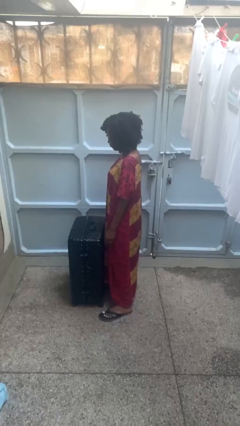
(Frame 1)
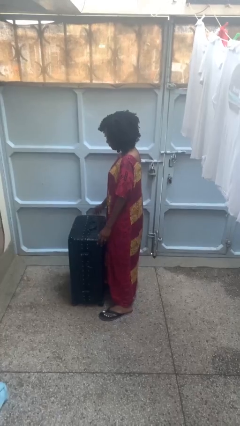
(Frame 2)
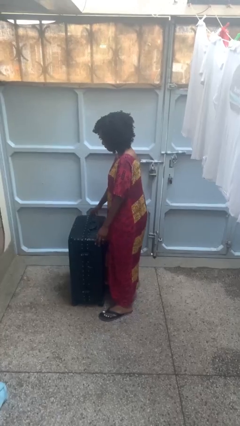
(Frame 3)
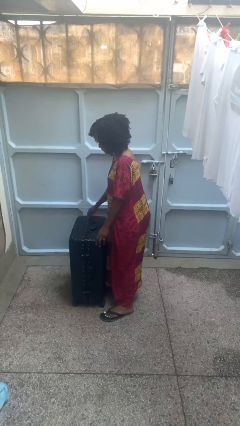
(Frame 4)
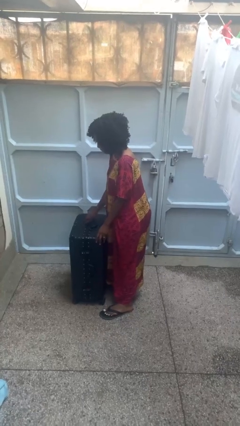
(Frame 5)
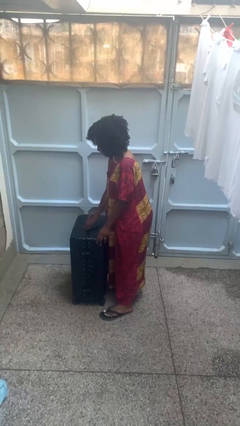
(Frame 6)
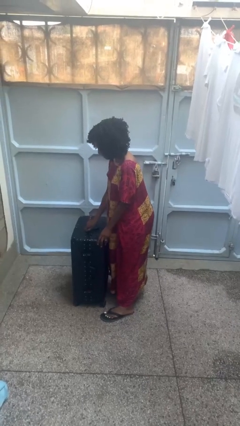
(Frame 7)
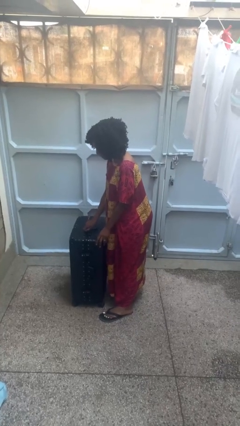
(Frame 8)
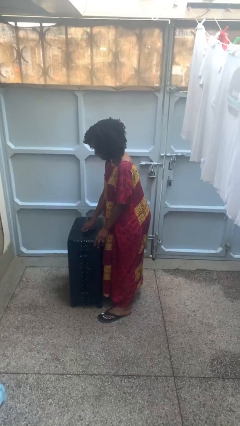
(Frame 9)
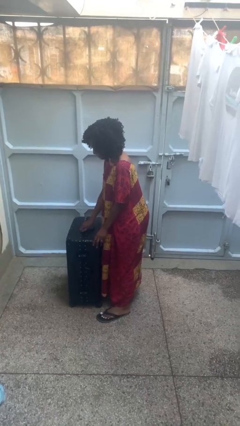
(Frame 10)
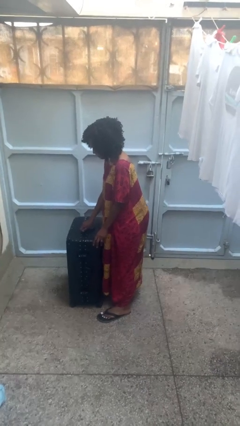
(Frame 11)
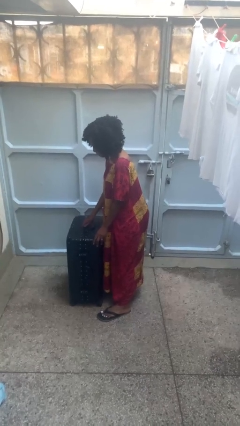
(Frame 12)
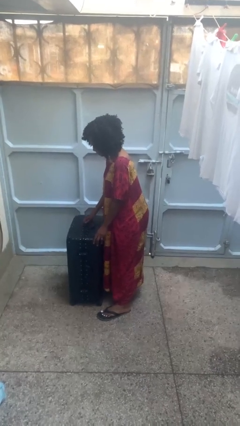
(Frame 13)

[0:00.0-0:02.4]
person opens suitcase

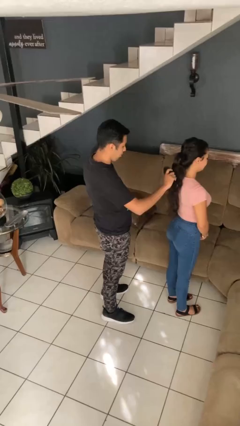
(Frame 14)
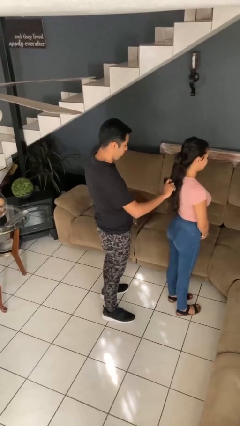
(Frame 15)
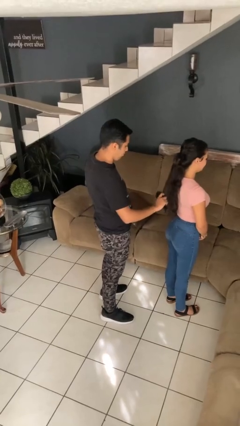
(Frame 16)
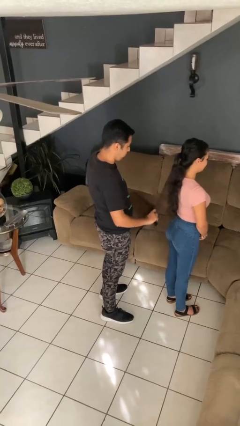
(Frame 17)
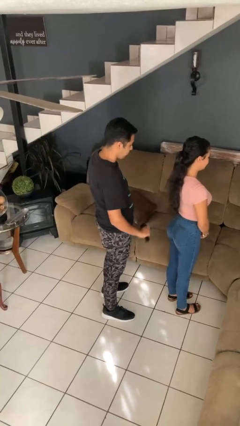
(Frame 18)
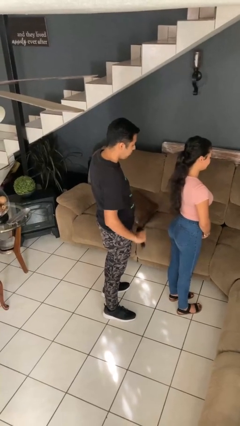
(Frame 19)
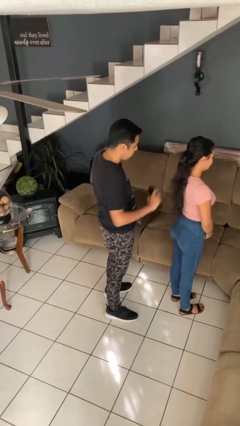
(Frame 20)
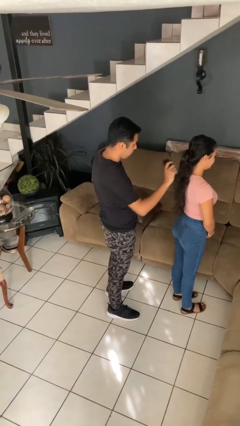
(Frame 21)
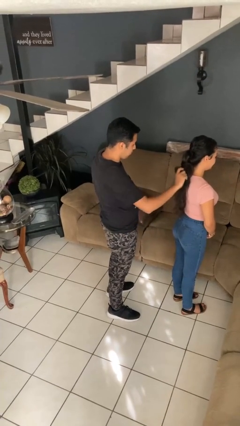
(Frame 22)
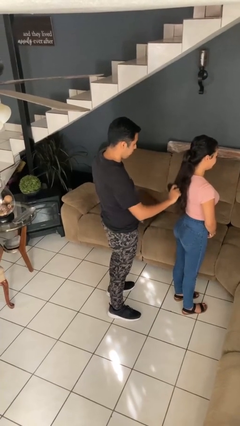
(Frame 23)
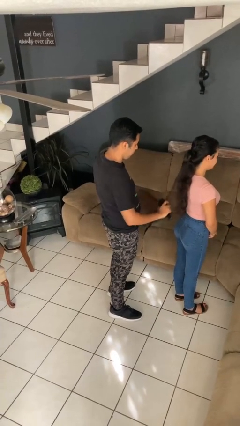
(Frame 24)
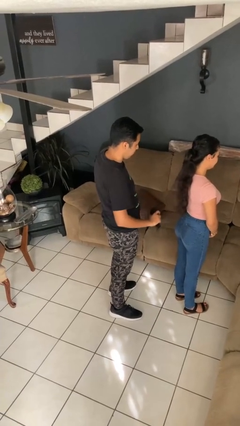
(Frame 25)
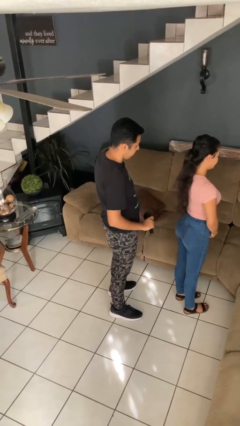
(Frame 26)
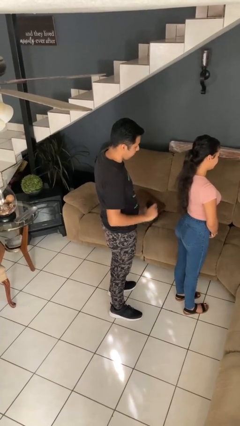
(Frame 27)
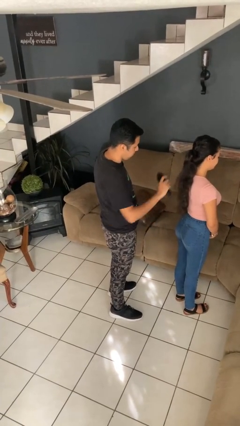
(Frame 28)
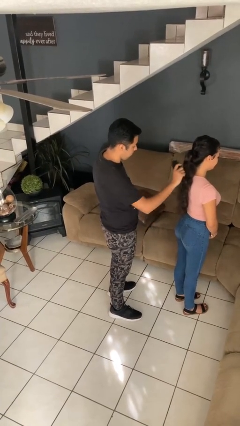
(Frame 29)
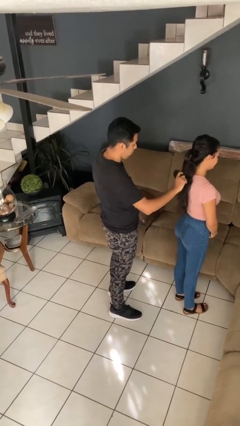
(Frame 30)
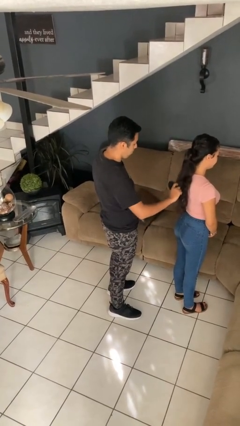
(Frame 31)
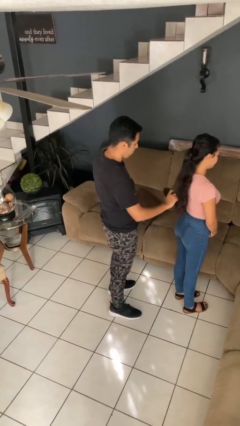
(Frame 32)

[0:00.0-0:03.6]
person brushes hair of person

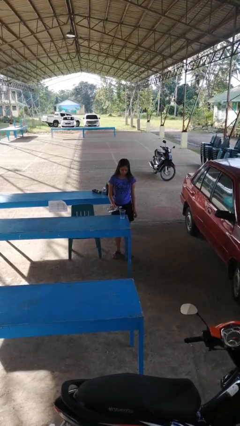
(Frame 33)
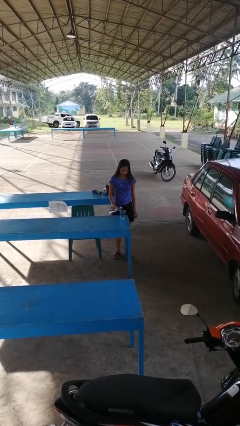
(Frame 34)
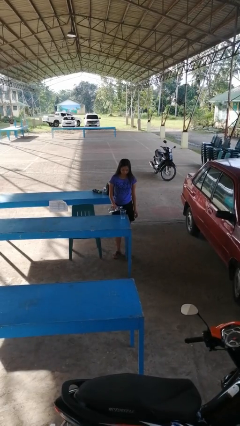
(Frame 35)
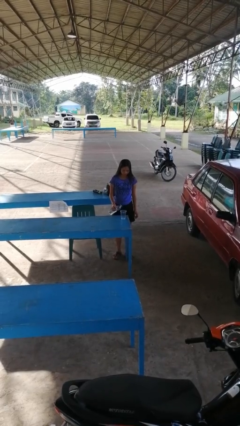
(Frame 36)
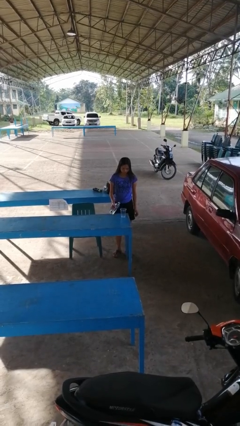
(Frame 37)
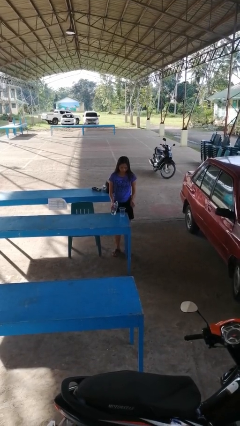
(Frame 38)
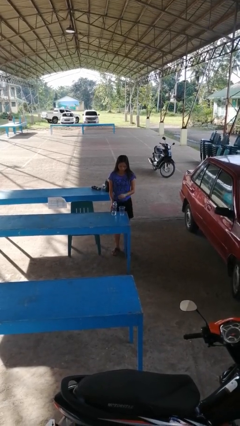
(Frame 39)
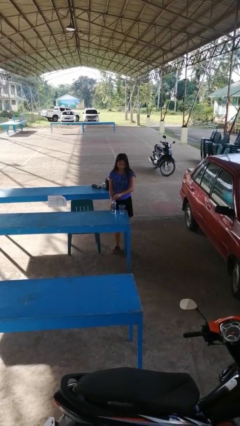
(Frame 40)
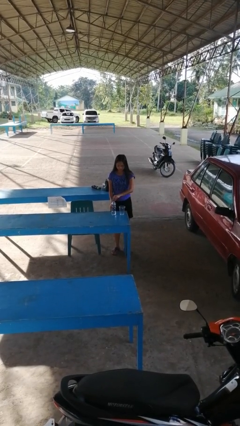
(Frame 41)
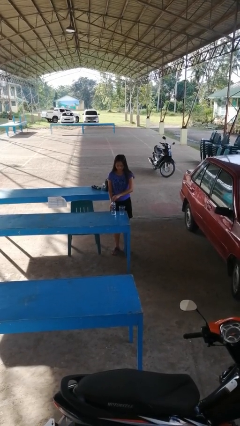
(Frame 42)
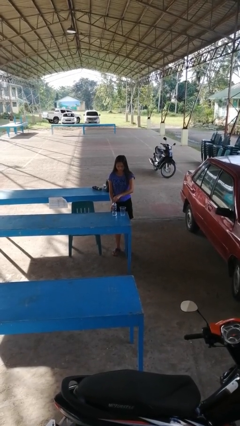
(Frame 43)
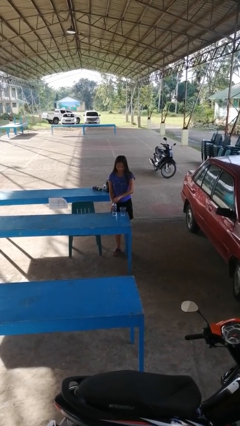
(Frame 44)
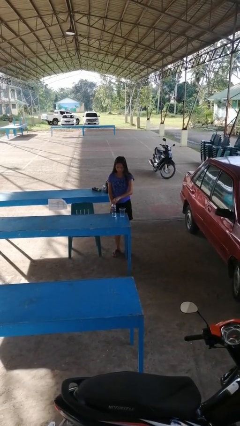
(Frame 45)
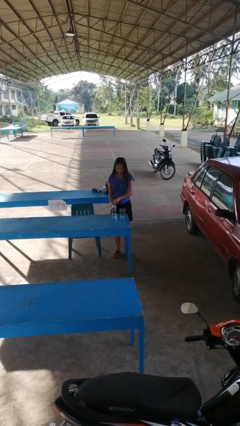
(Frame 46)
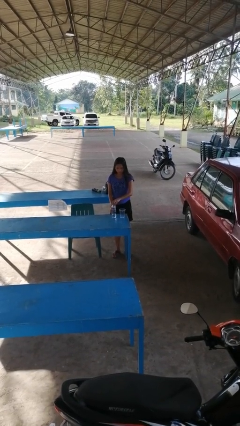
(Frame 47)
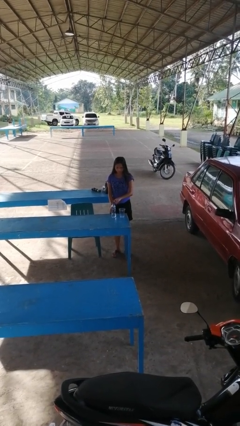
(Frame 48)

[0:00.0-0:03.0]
person screws lid to bottle

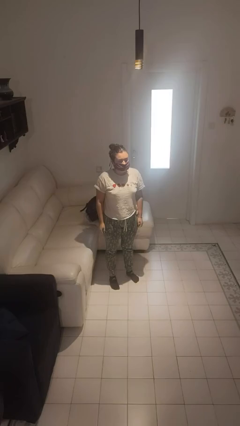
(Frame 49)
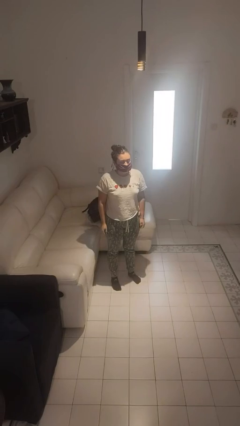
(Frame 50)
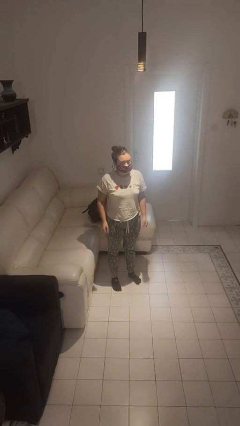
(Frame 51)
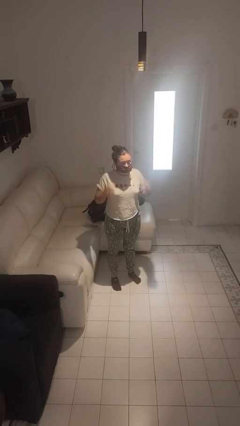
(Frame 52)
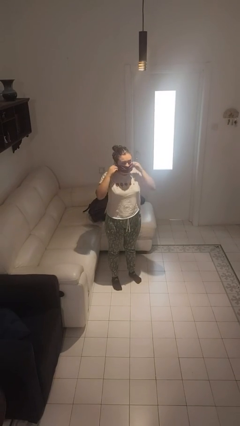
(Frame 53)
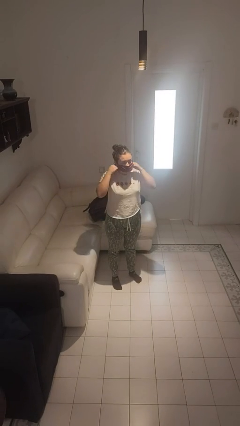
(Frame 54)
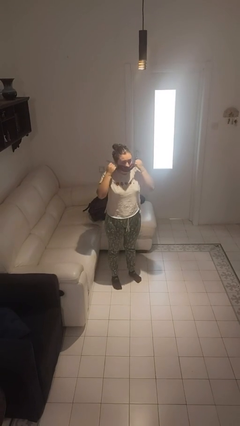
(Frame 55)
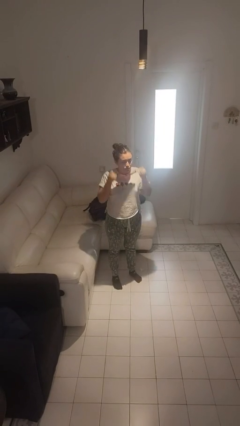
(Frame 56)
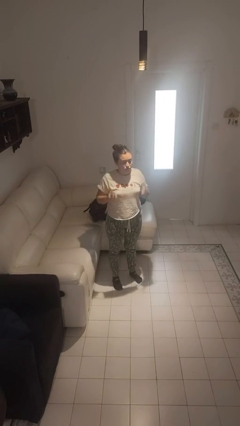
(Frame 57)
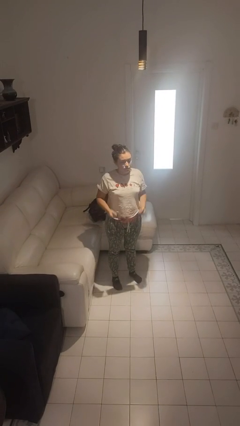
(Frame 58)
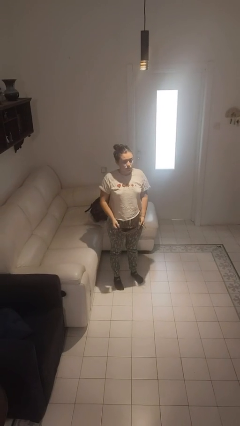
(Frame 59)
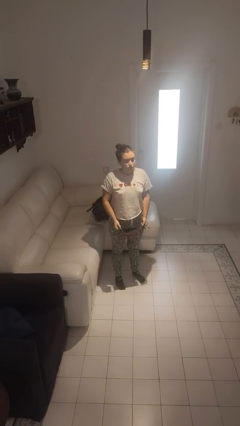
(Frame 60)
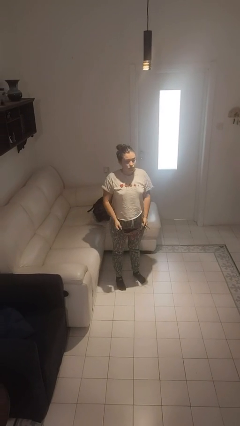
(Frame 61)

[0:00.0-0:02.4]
person takes off facemask

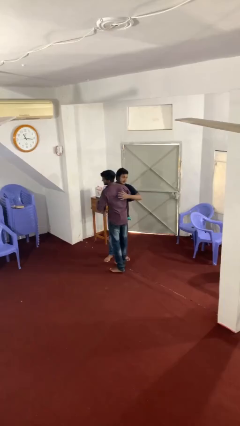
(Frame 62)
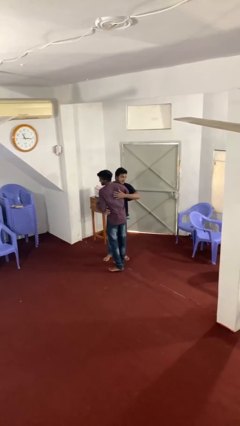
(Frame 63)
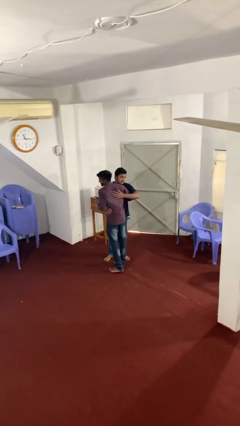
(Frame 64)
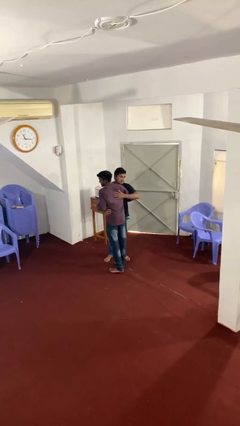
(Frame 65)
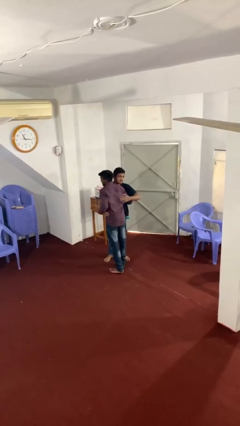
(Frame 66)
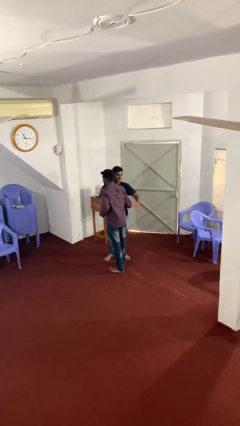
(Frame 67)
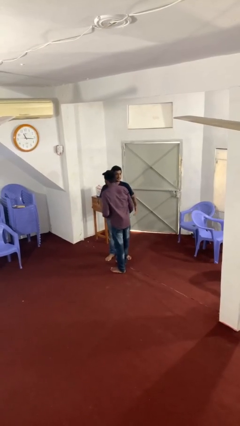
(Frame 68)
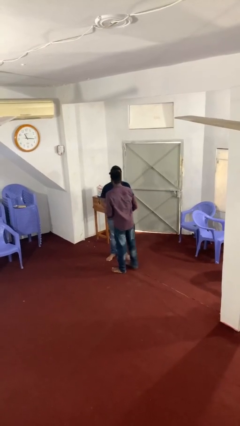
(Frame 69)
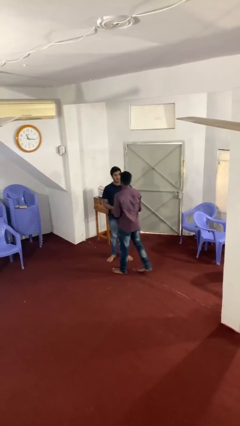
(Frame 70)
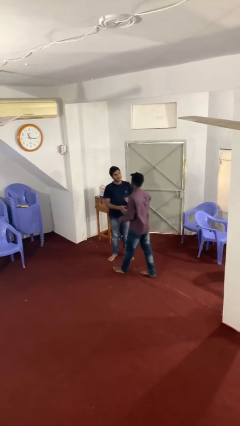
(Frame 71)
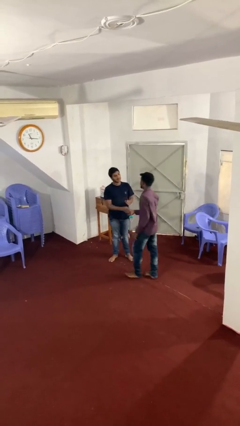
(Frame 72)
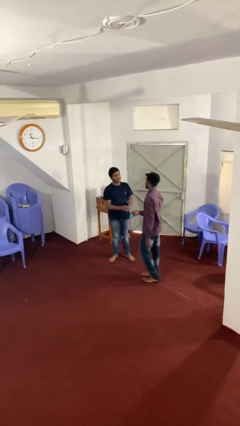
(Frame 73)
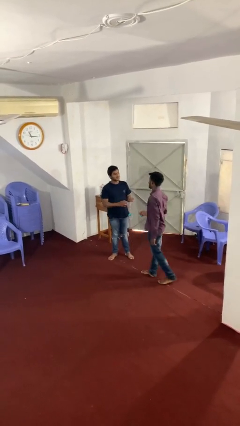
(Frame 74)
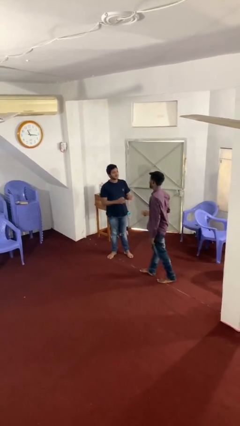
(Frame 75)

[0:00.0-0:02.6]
person embraces person

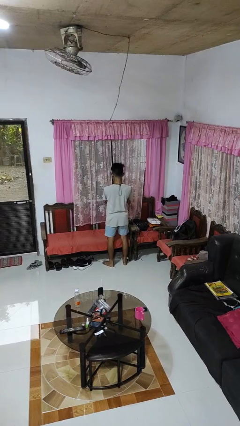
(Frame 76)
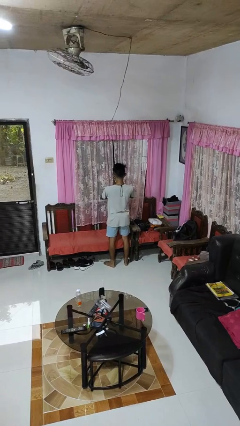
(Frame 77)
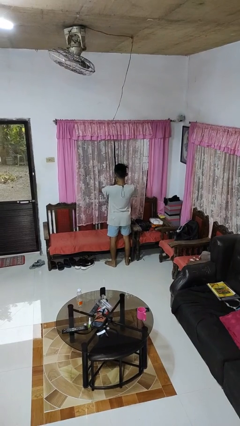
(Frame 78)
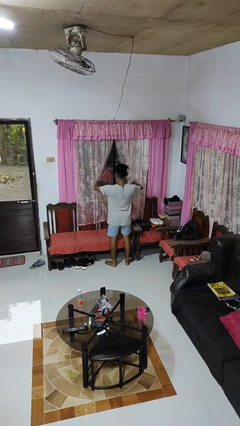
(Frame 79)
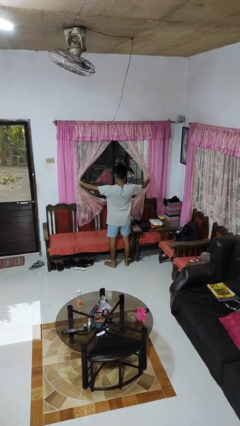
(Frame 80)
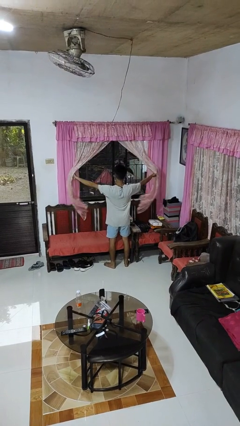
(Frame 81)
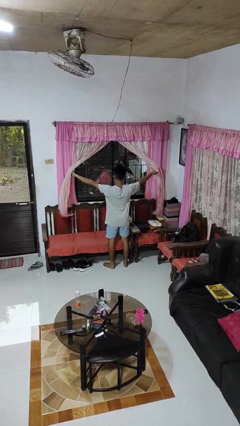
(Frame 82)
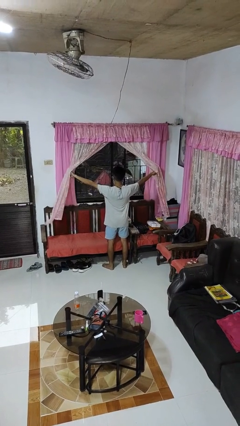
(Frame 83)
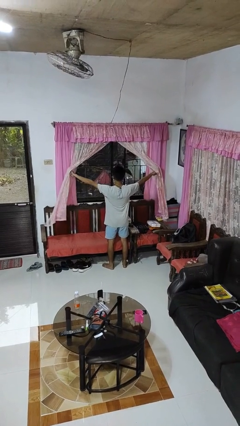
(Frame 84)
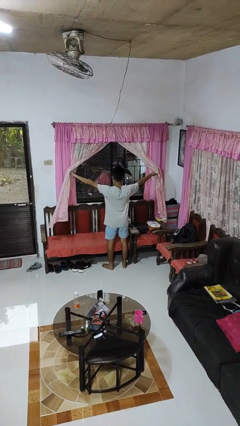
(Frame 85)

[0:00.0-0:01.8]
person opens curtains

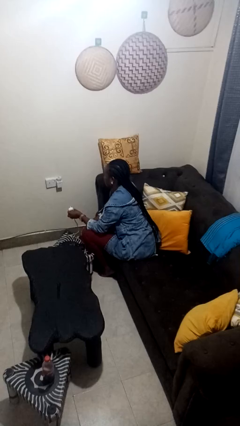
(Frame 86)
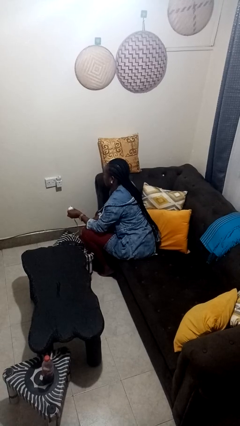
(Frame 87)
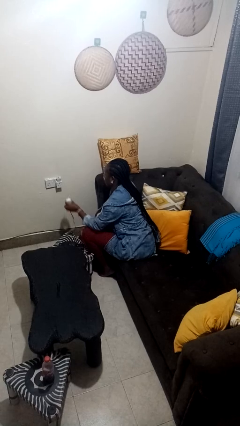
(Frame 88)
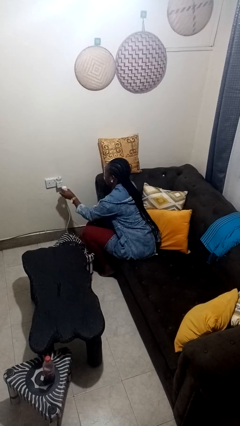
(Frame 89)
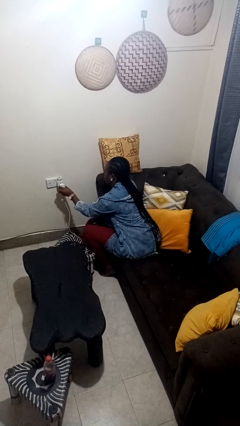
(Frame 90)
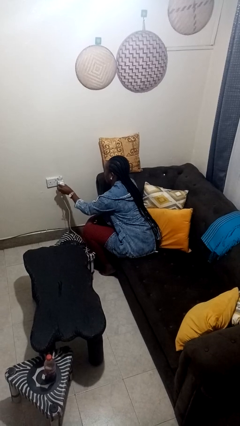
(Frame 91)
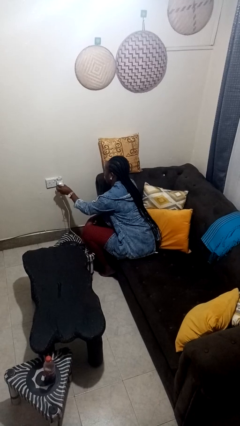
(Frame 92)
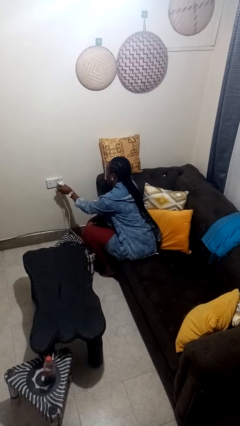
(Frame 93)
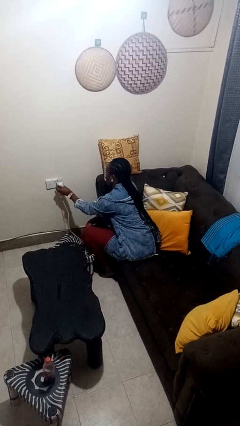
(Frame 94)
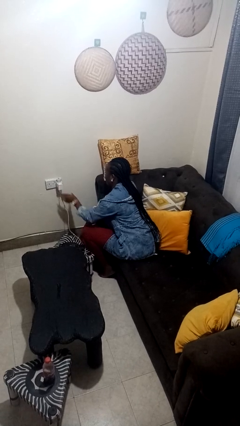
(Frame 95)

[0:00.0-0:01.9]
person plugs into electrical socket
